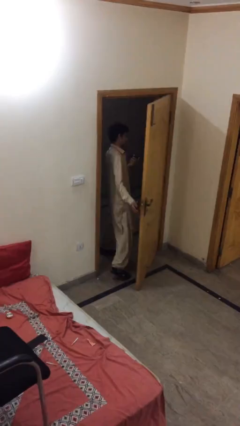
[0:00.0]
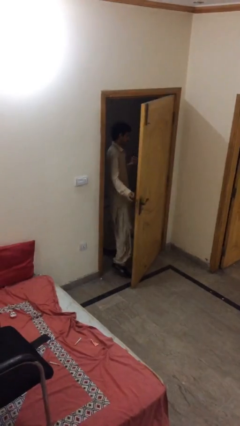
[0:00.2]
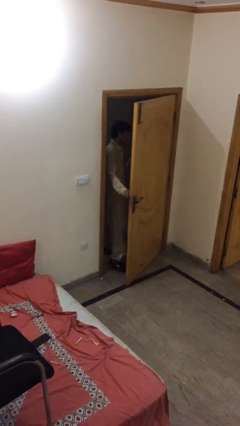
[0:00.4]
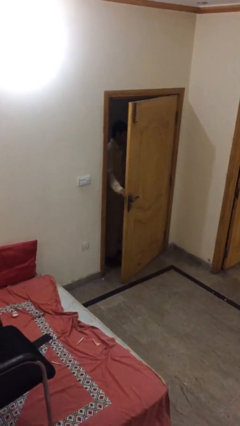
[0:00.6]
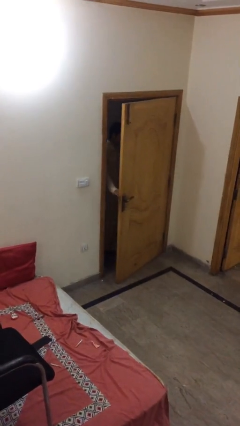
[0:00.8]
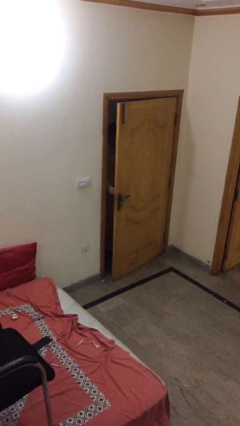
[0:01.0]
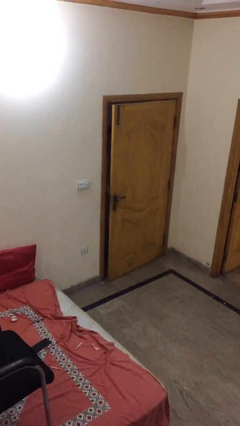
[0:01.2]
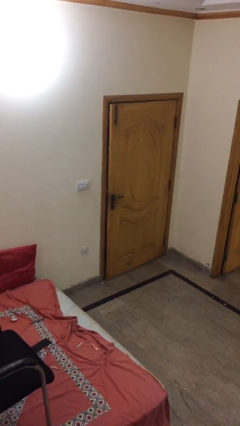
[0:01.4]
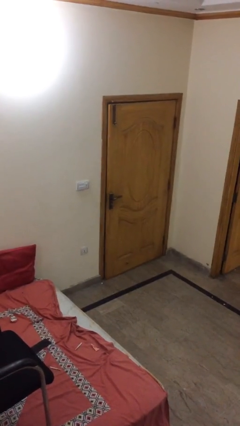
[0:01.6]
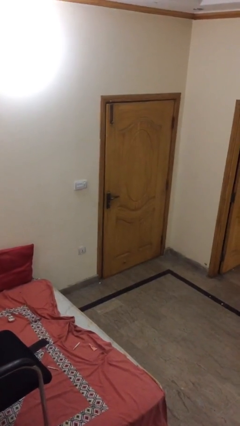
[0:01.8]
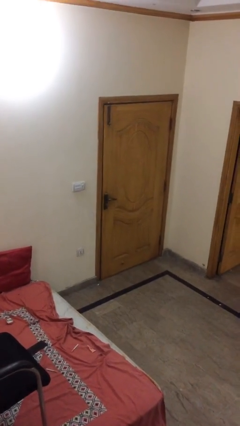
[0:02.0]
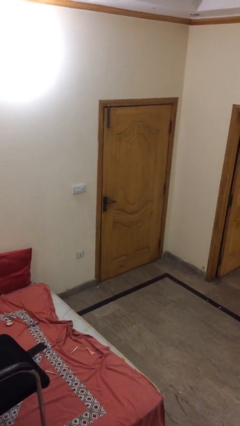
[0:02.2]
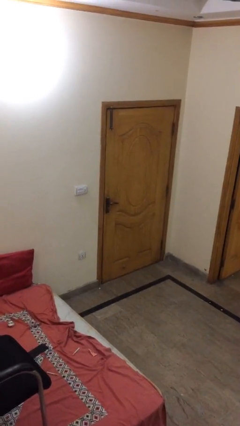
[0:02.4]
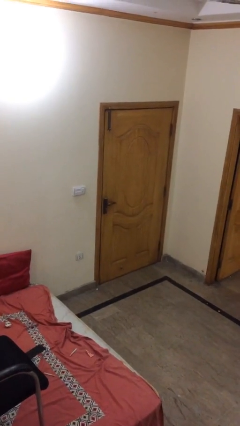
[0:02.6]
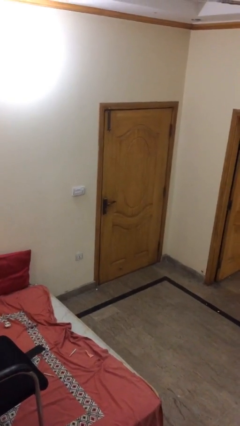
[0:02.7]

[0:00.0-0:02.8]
person closes facility door

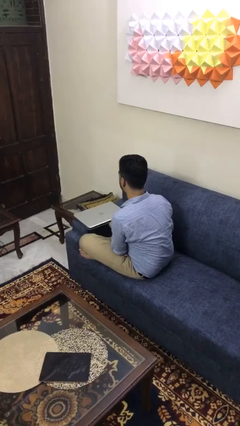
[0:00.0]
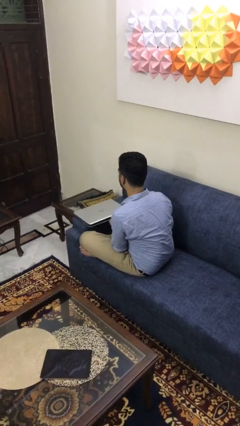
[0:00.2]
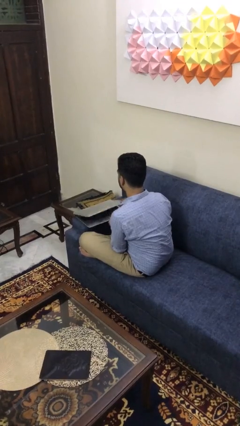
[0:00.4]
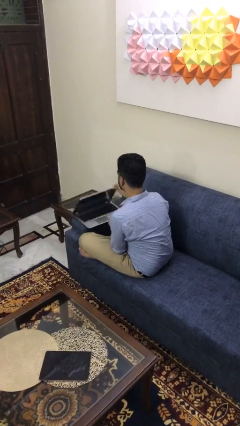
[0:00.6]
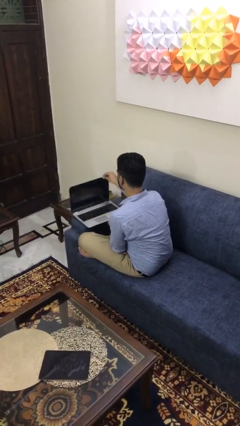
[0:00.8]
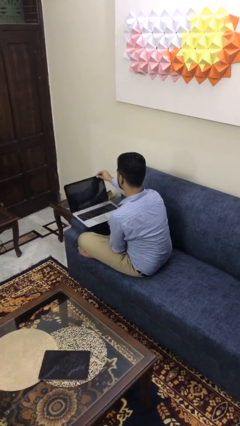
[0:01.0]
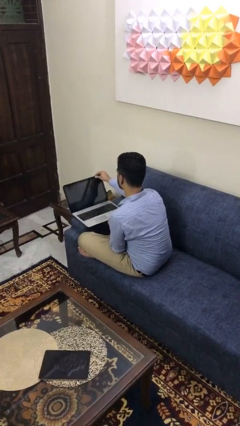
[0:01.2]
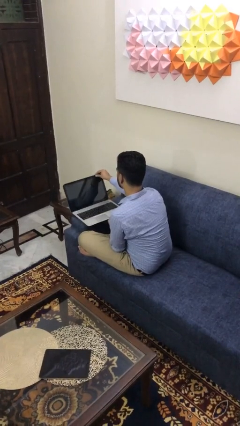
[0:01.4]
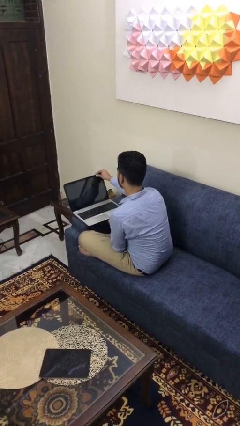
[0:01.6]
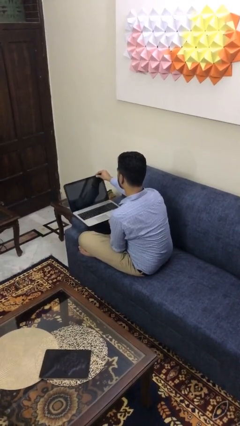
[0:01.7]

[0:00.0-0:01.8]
person opens laptop

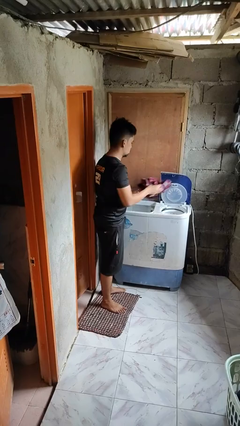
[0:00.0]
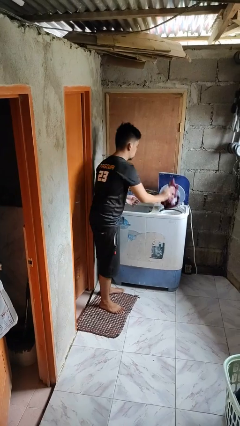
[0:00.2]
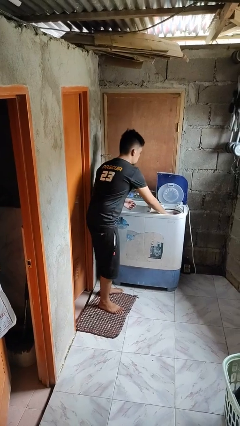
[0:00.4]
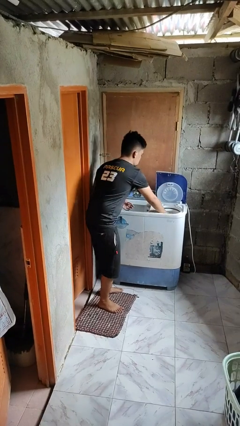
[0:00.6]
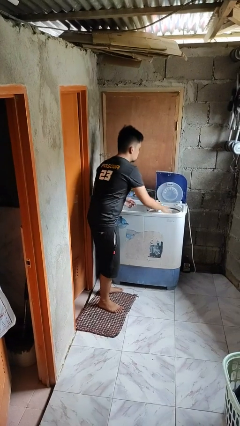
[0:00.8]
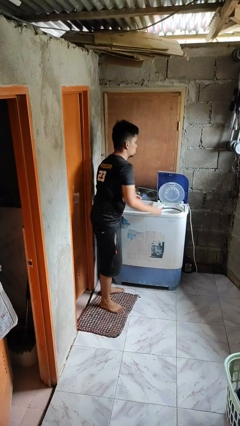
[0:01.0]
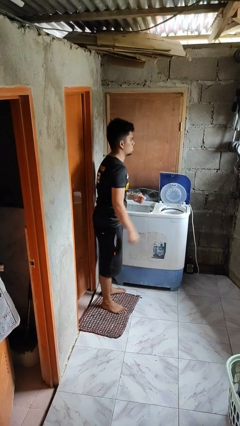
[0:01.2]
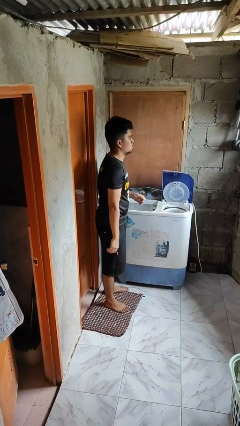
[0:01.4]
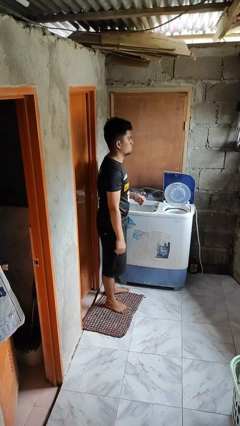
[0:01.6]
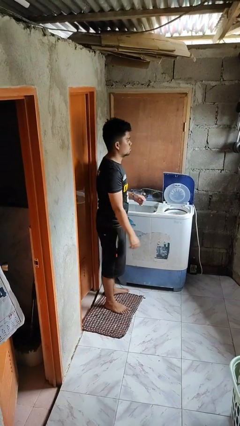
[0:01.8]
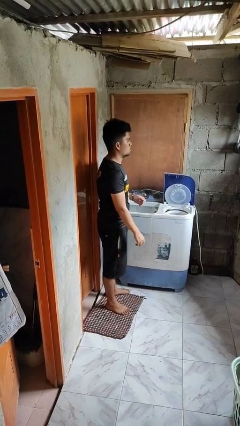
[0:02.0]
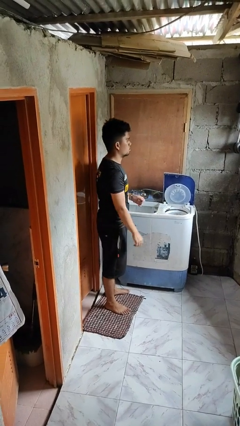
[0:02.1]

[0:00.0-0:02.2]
person loads dryer

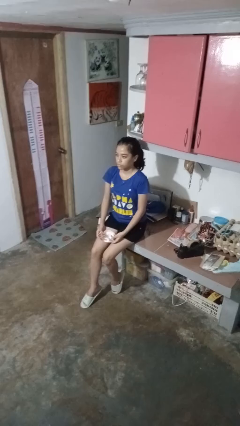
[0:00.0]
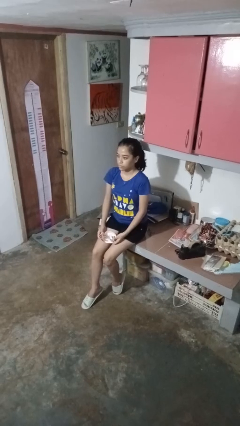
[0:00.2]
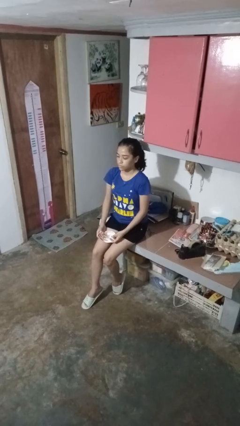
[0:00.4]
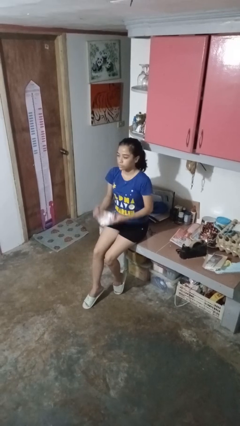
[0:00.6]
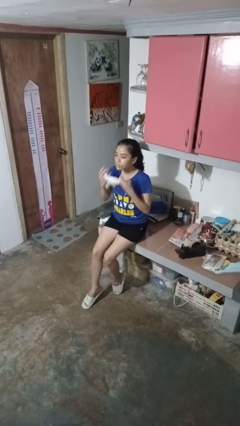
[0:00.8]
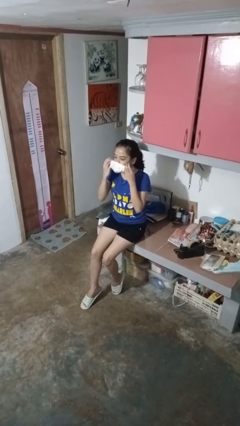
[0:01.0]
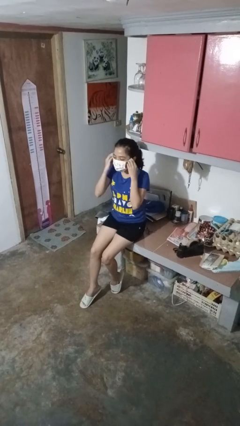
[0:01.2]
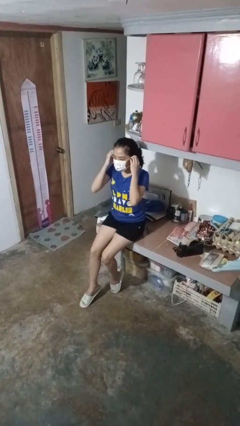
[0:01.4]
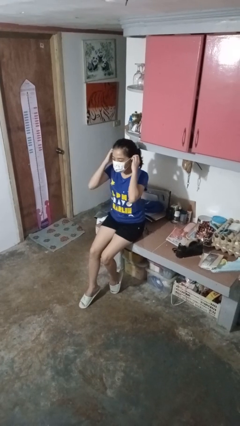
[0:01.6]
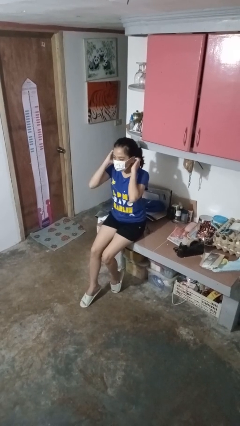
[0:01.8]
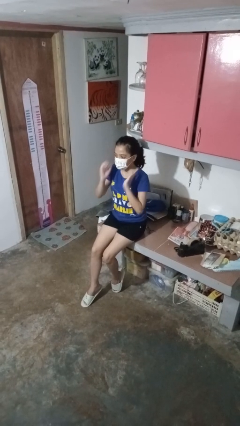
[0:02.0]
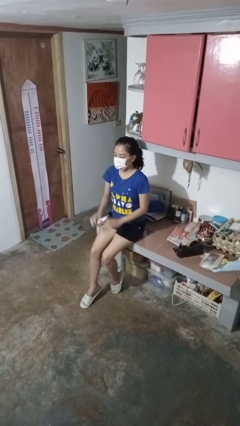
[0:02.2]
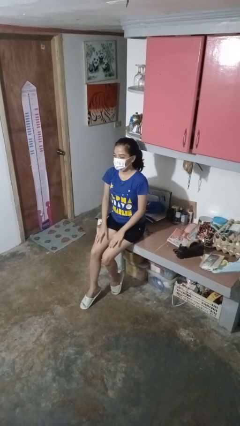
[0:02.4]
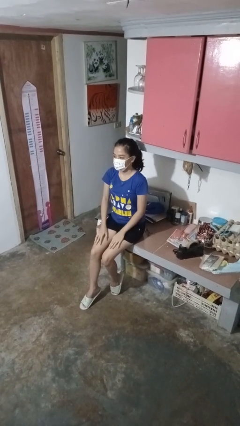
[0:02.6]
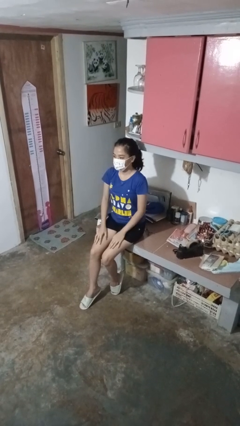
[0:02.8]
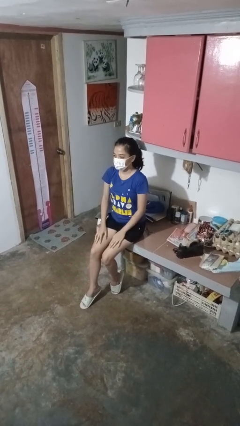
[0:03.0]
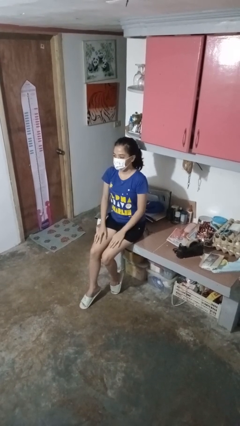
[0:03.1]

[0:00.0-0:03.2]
person puts on facemask

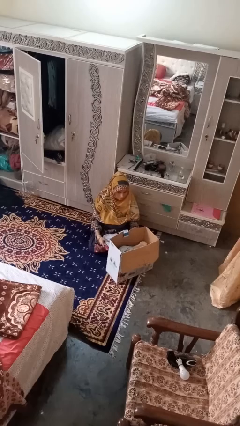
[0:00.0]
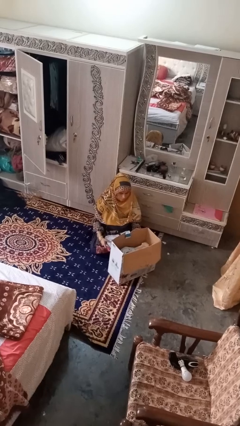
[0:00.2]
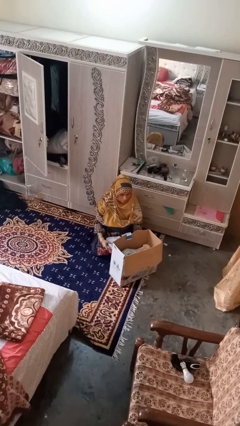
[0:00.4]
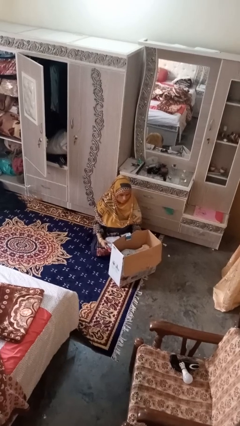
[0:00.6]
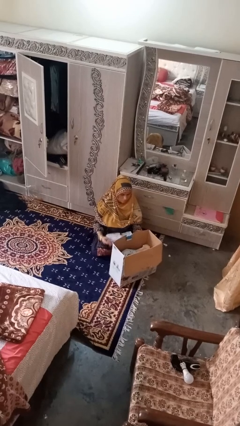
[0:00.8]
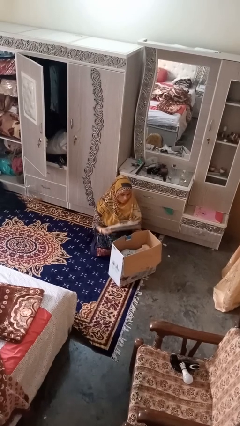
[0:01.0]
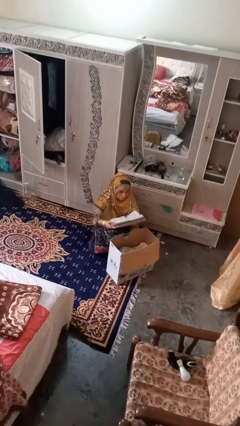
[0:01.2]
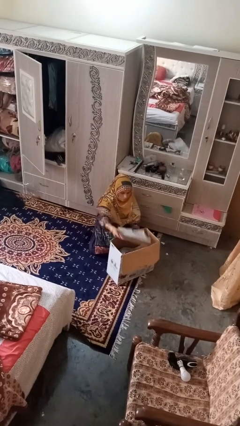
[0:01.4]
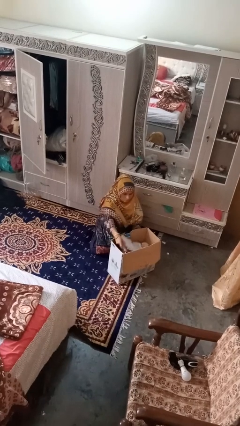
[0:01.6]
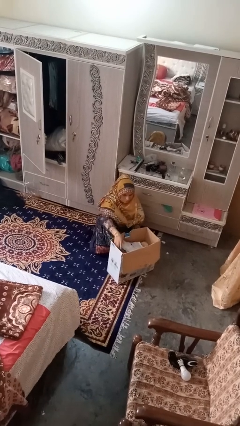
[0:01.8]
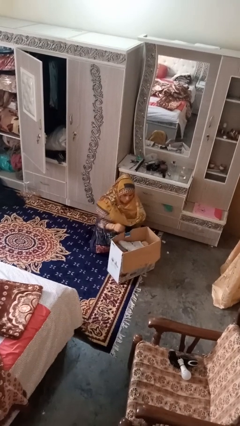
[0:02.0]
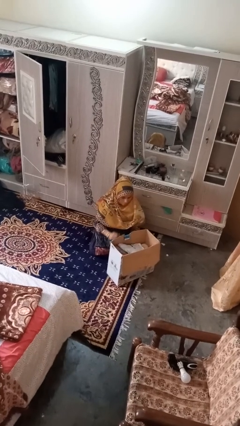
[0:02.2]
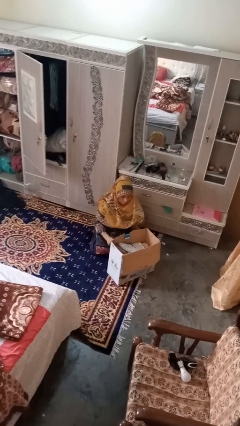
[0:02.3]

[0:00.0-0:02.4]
person puts object into box

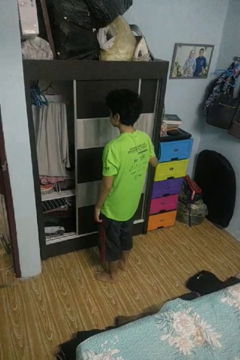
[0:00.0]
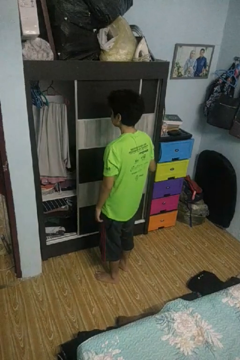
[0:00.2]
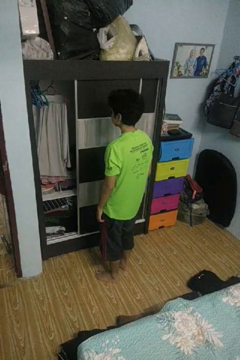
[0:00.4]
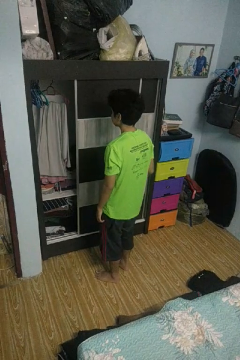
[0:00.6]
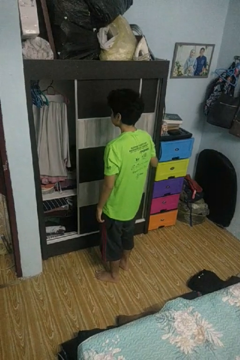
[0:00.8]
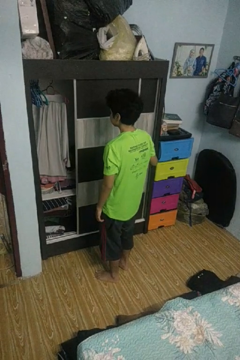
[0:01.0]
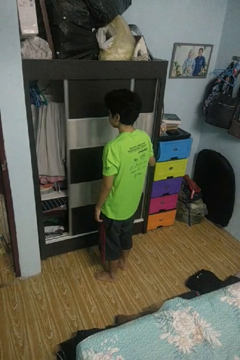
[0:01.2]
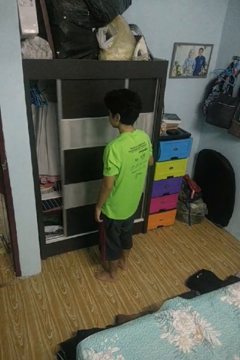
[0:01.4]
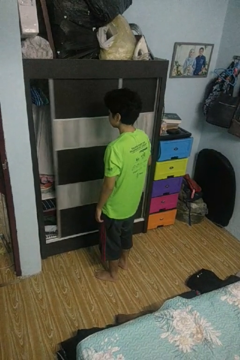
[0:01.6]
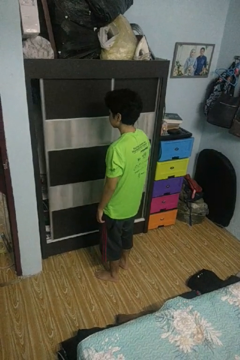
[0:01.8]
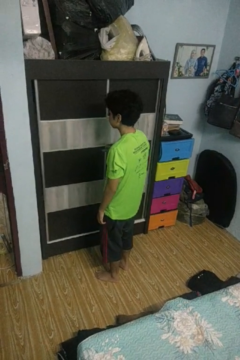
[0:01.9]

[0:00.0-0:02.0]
person closes closet door

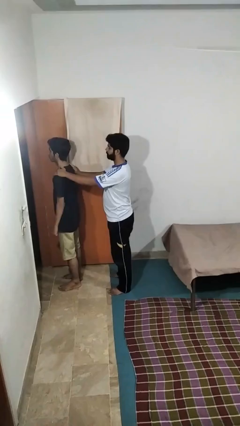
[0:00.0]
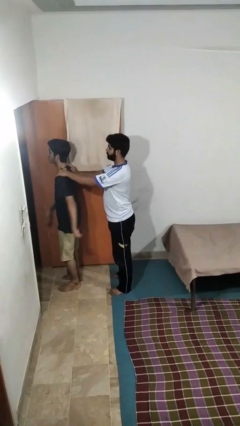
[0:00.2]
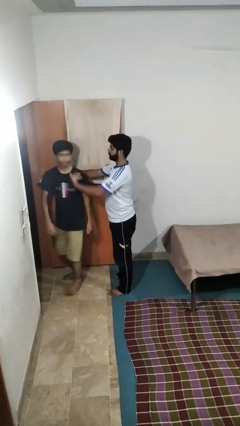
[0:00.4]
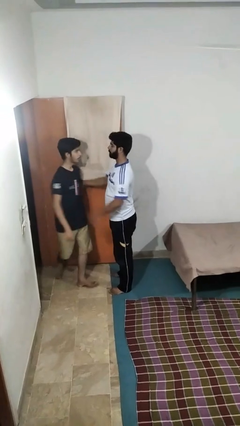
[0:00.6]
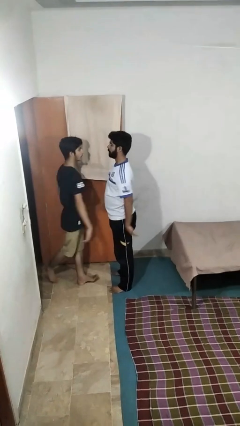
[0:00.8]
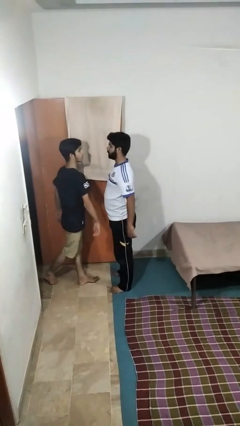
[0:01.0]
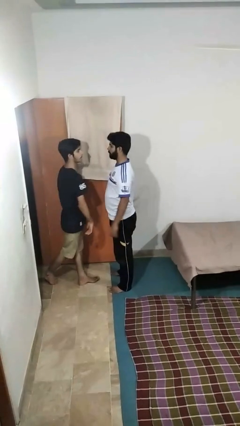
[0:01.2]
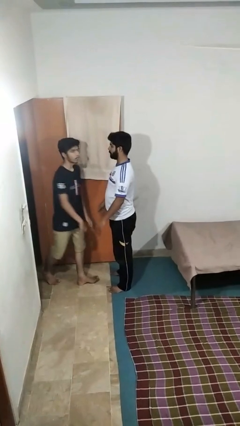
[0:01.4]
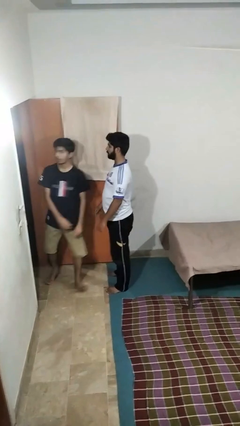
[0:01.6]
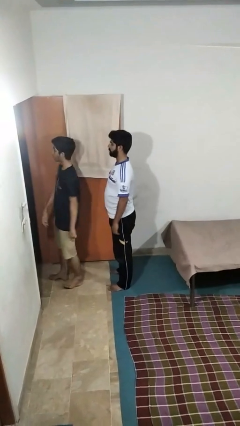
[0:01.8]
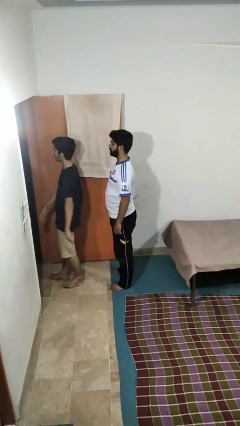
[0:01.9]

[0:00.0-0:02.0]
person spins person around

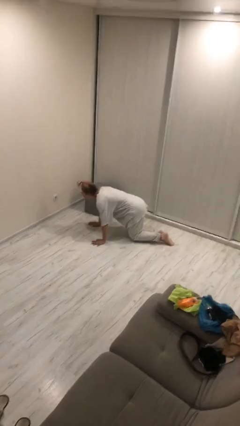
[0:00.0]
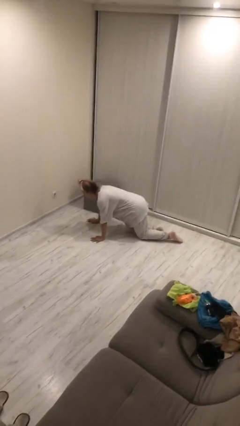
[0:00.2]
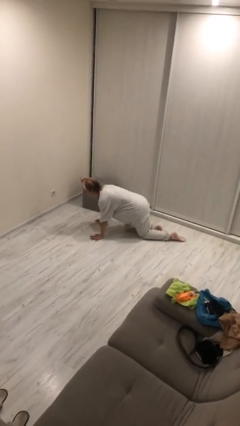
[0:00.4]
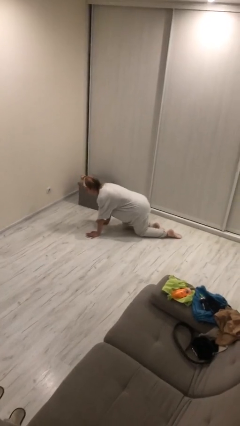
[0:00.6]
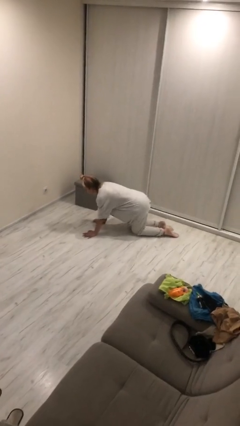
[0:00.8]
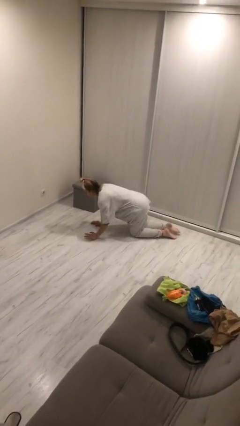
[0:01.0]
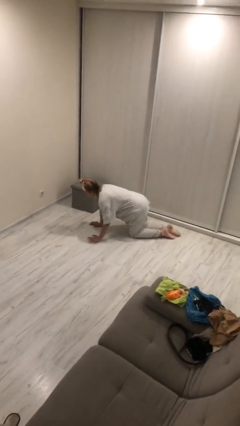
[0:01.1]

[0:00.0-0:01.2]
person crawls
